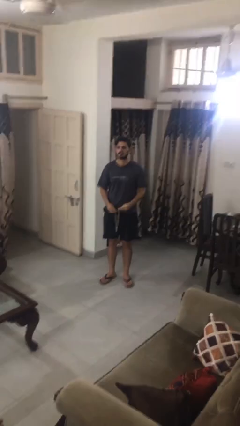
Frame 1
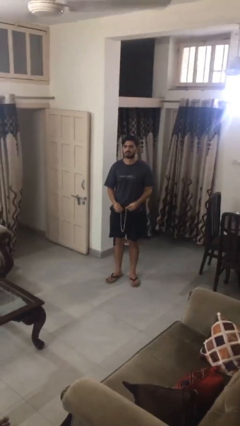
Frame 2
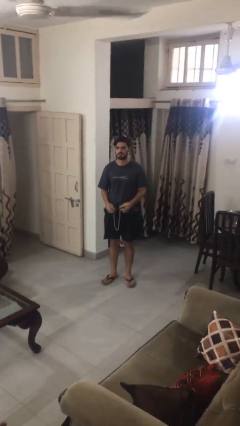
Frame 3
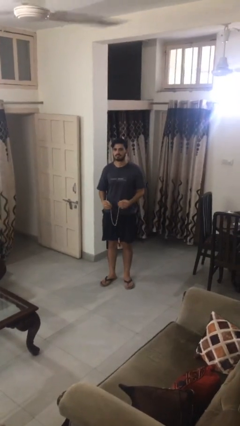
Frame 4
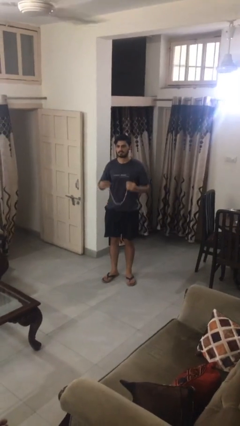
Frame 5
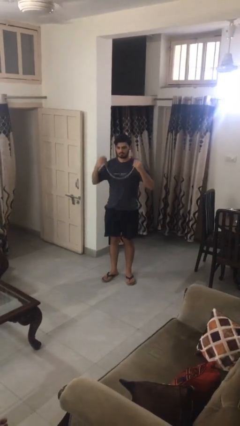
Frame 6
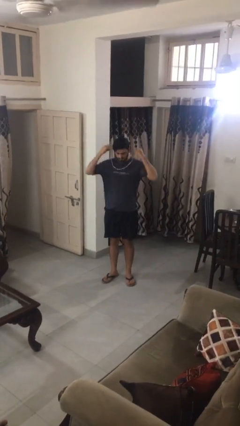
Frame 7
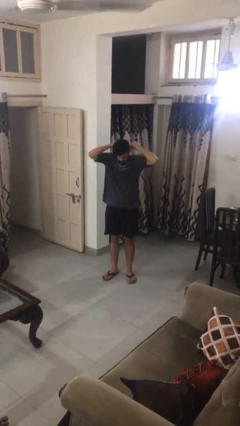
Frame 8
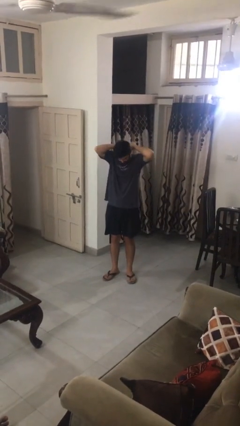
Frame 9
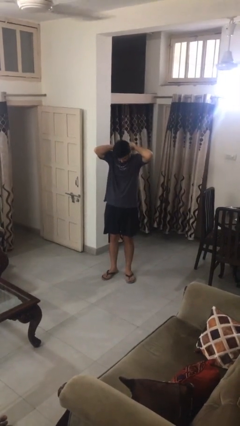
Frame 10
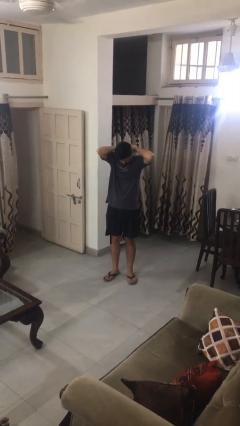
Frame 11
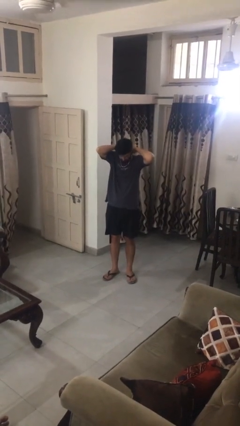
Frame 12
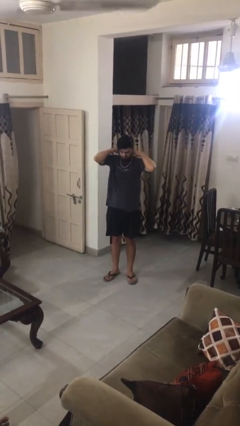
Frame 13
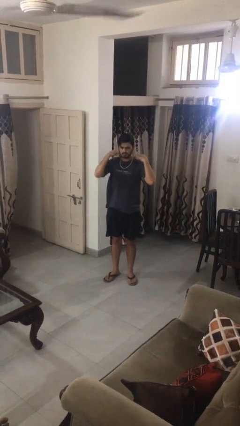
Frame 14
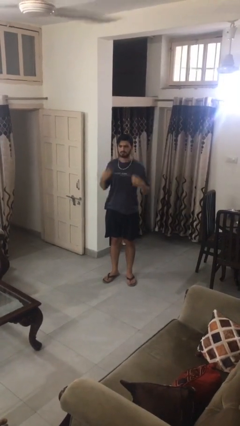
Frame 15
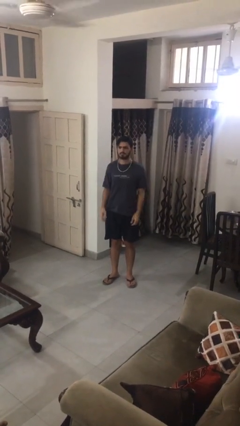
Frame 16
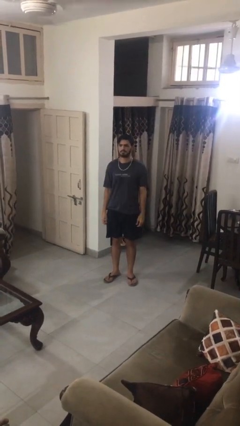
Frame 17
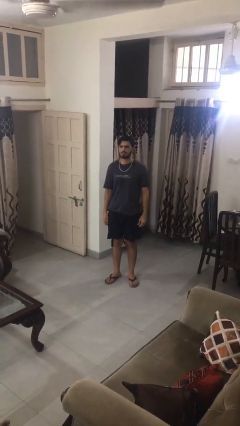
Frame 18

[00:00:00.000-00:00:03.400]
person puts on necklace

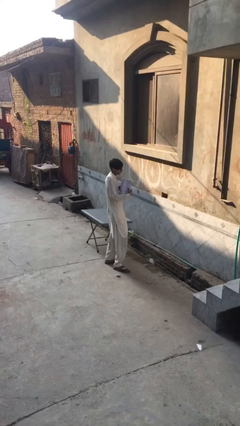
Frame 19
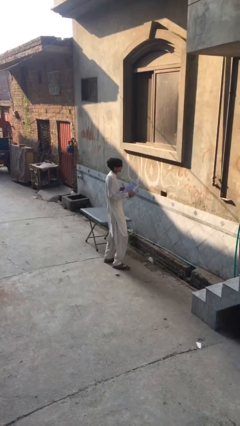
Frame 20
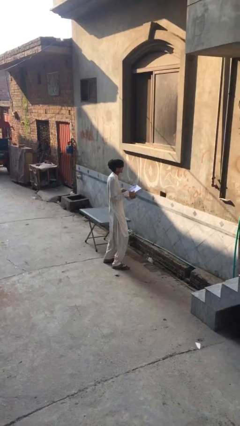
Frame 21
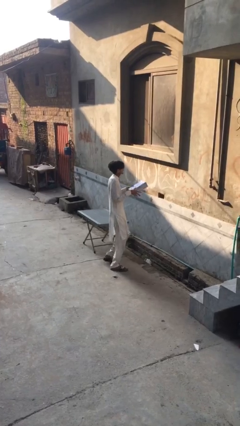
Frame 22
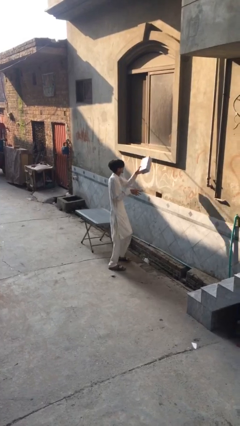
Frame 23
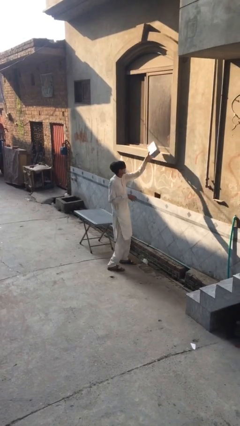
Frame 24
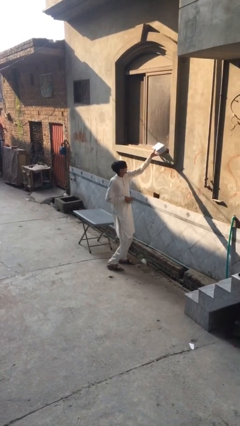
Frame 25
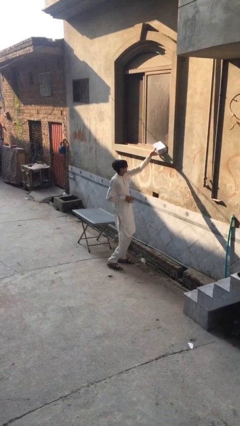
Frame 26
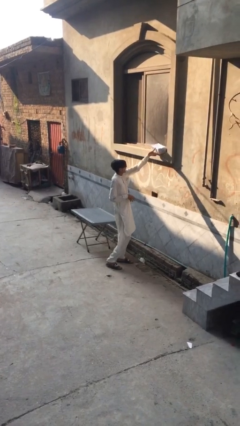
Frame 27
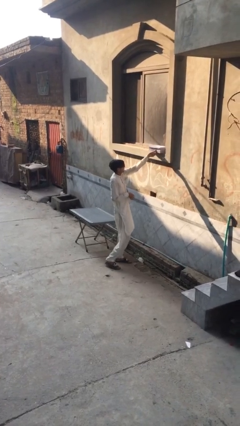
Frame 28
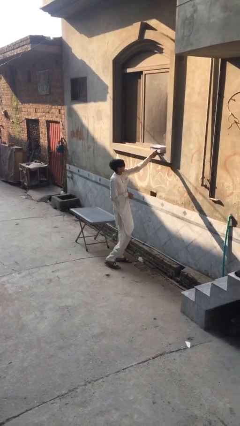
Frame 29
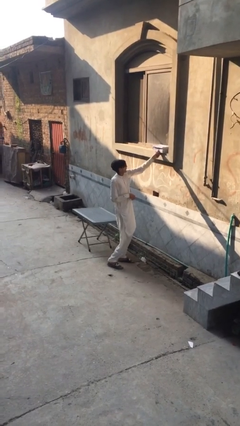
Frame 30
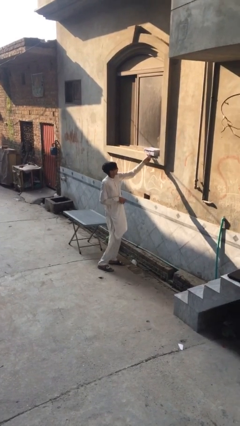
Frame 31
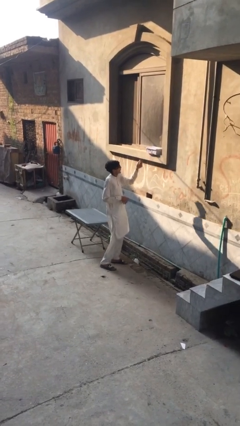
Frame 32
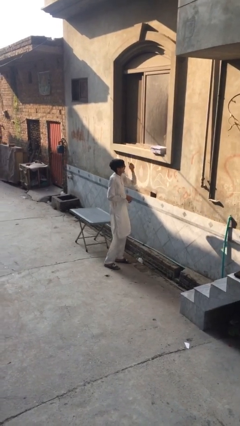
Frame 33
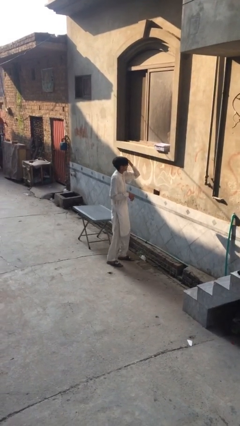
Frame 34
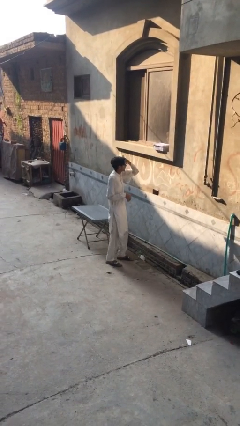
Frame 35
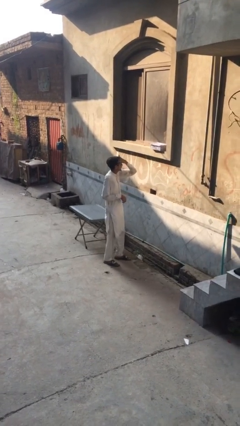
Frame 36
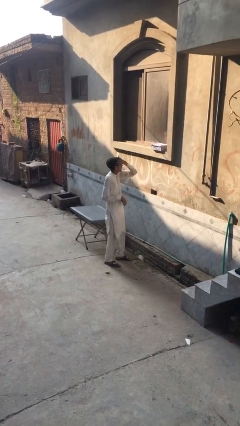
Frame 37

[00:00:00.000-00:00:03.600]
person puts down object on shelf

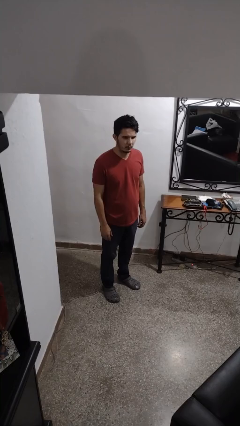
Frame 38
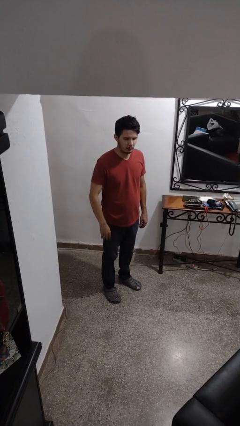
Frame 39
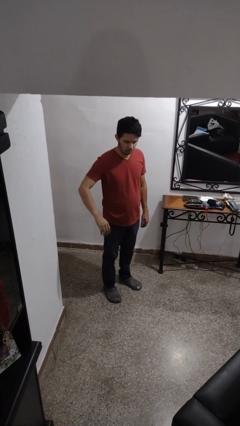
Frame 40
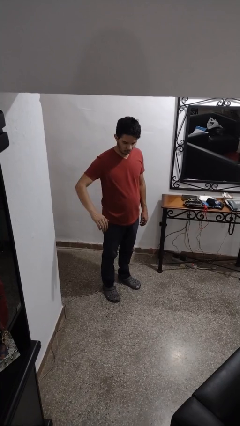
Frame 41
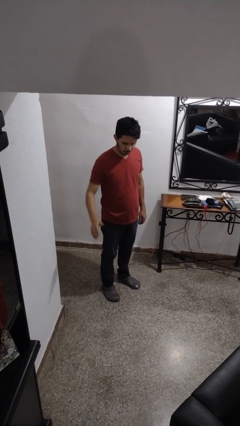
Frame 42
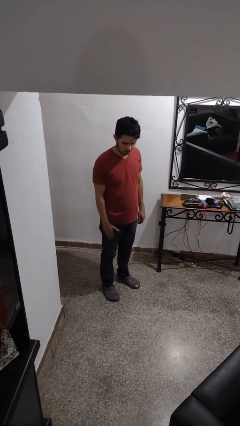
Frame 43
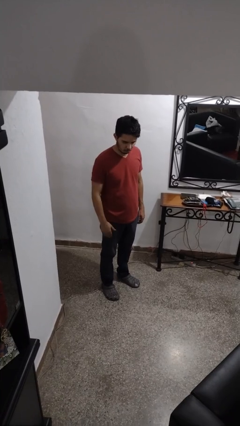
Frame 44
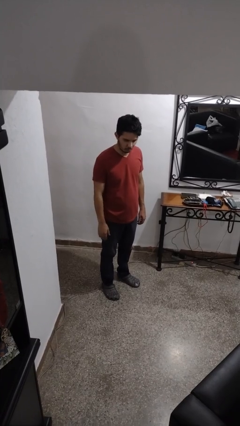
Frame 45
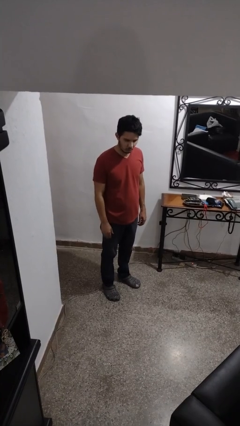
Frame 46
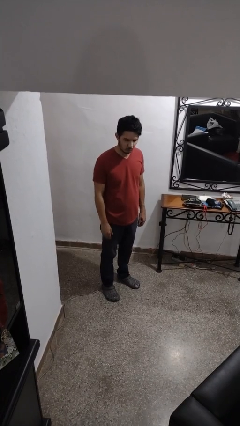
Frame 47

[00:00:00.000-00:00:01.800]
person slaps hands on thighs

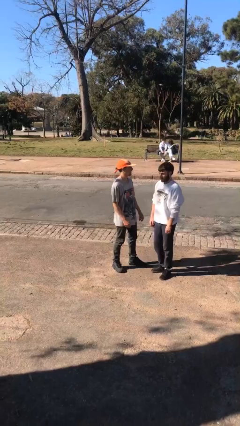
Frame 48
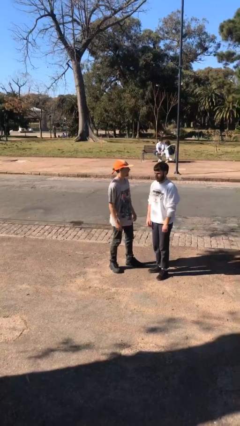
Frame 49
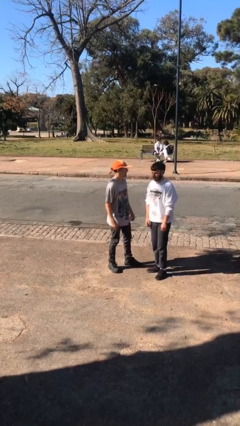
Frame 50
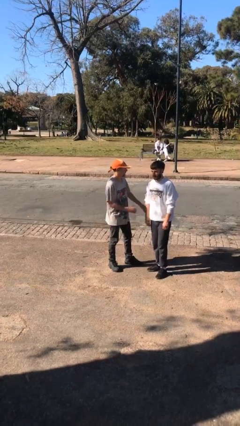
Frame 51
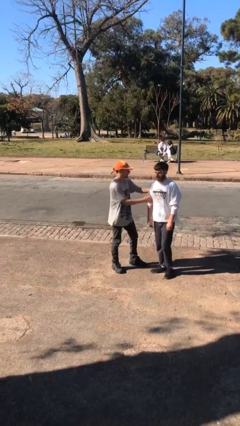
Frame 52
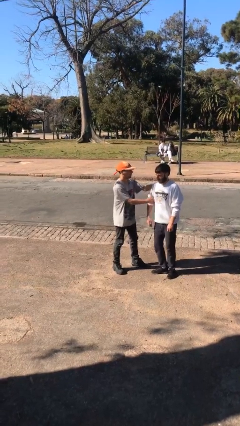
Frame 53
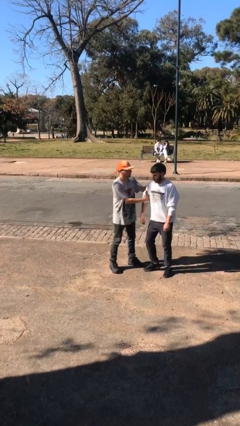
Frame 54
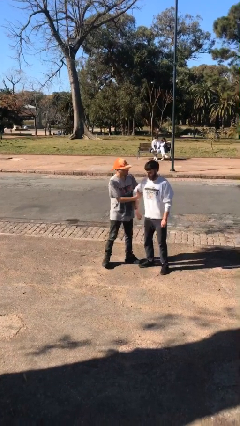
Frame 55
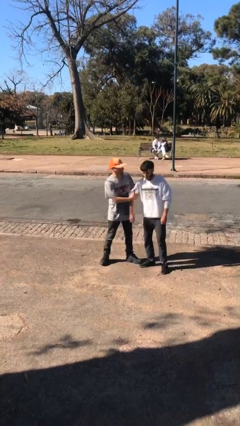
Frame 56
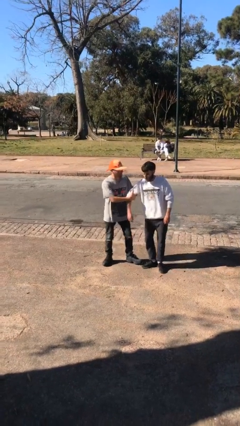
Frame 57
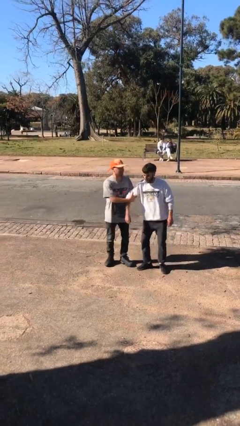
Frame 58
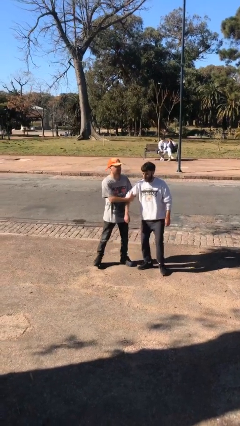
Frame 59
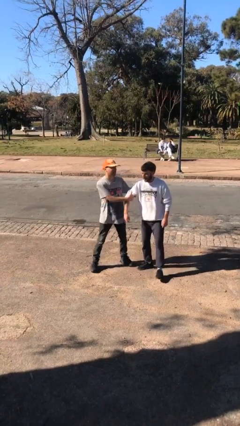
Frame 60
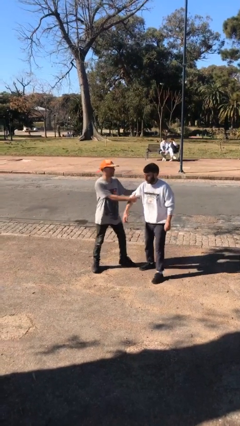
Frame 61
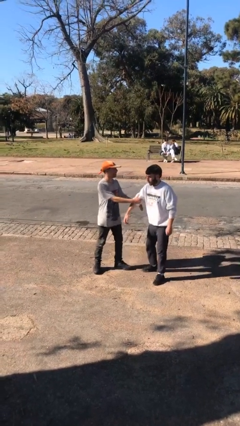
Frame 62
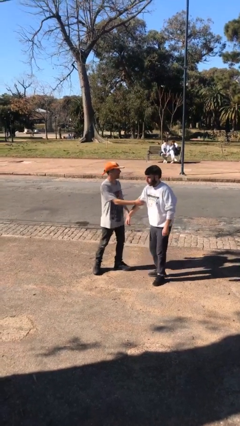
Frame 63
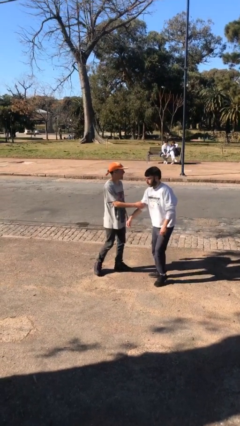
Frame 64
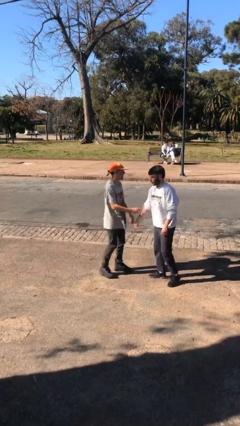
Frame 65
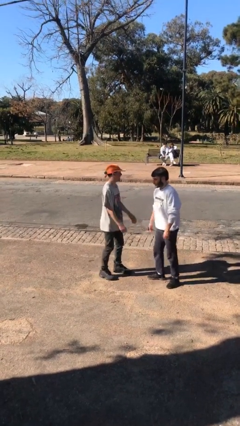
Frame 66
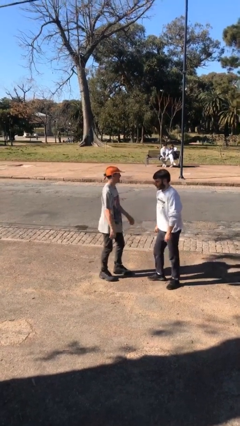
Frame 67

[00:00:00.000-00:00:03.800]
person grabs person by bicep

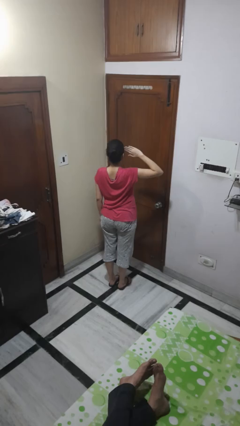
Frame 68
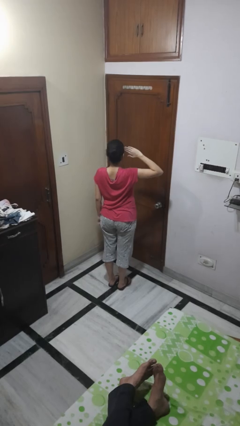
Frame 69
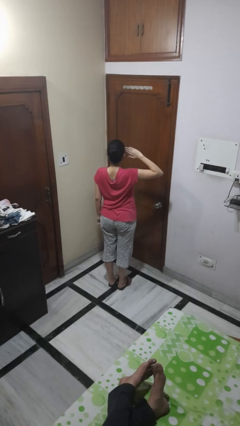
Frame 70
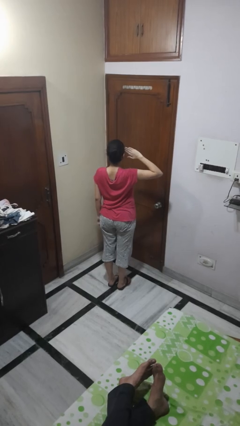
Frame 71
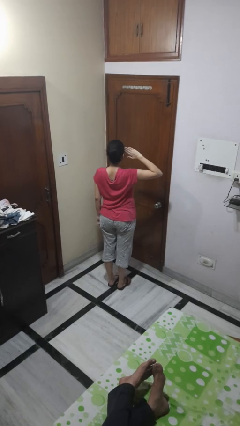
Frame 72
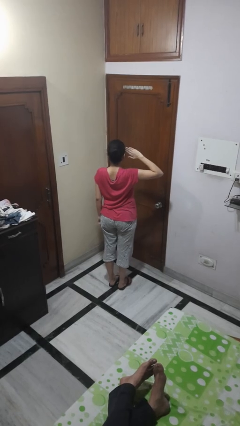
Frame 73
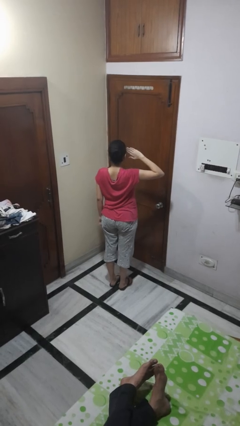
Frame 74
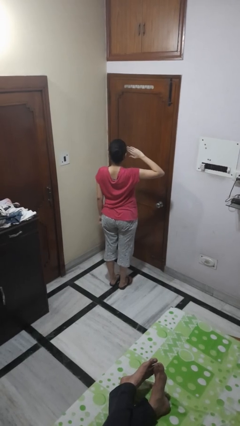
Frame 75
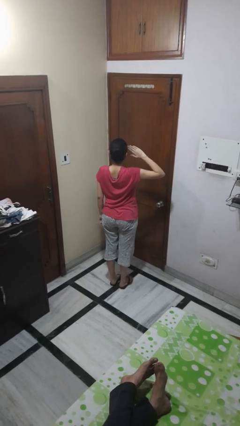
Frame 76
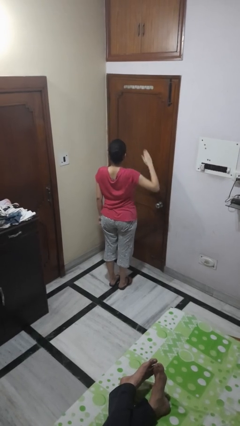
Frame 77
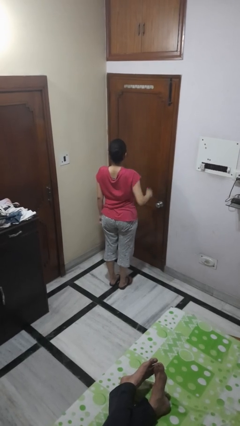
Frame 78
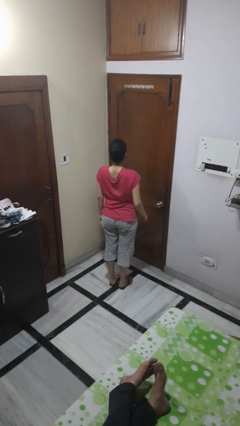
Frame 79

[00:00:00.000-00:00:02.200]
person salutes

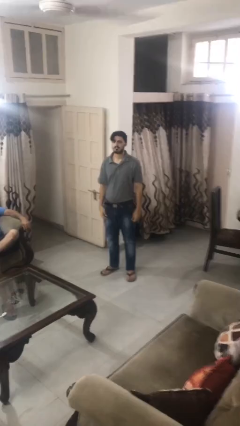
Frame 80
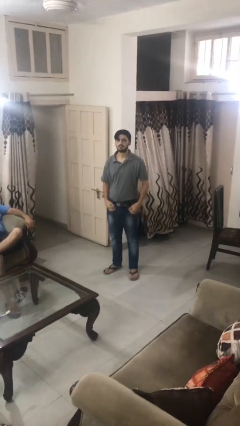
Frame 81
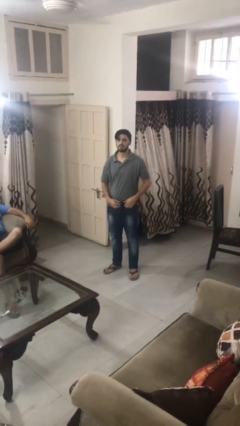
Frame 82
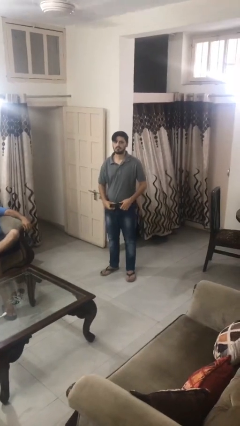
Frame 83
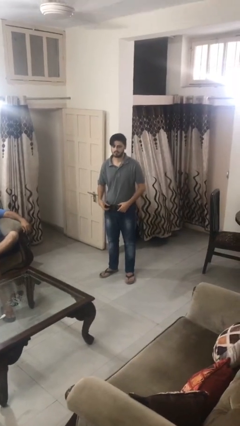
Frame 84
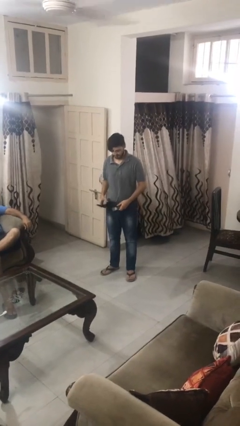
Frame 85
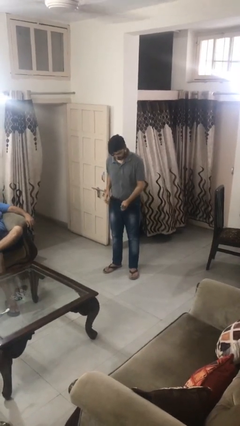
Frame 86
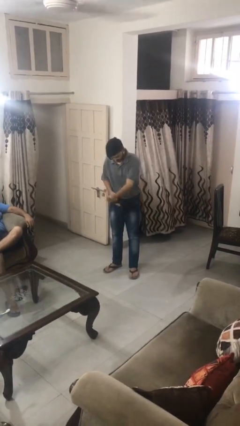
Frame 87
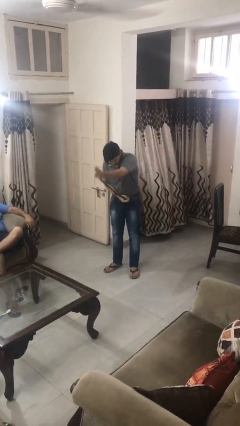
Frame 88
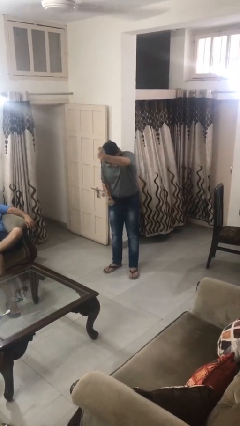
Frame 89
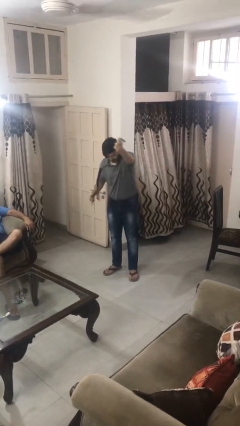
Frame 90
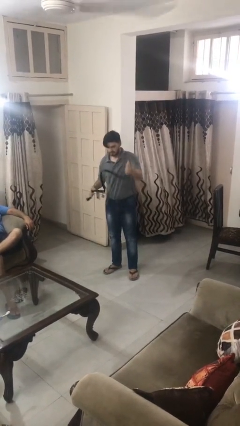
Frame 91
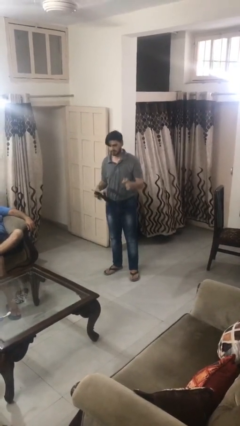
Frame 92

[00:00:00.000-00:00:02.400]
person takes off belt

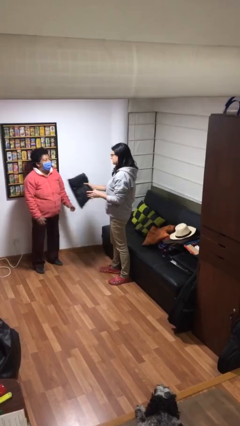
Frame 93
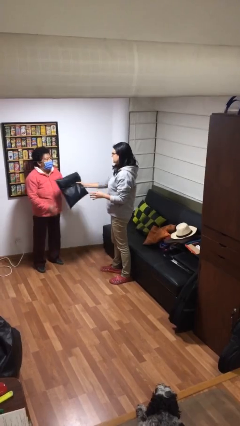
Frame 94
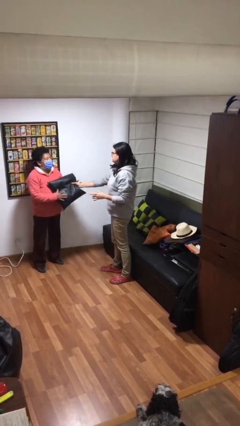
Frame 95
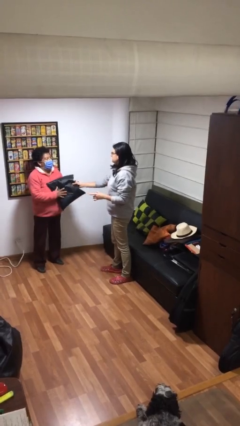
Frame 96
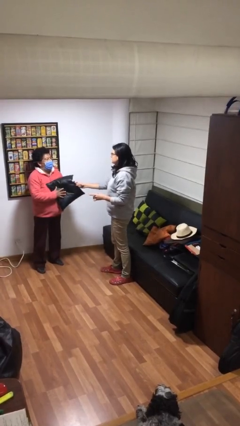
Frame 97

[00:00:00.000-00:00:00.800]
person transfers object to person
